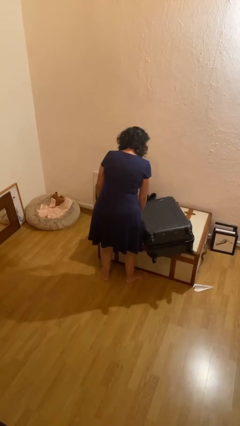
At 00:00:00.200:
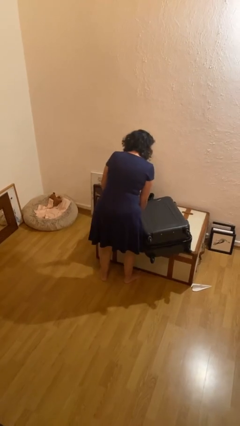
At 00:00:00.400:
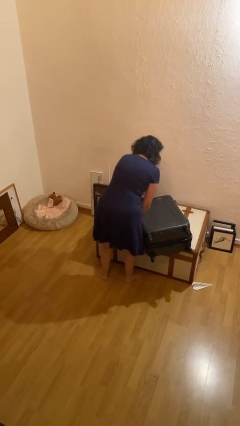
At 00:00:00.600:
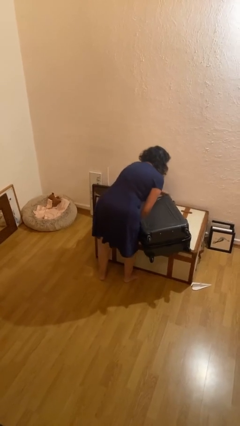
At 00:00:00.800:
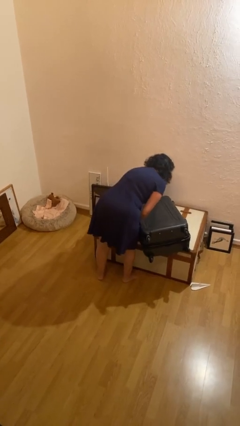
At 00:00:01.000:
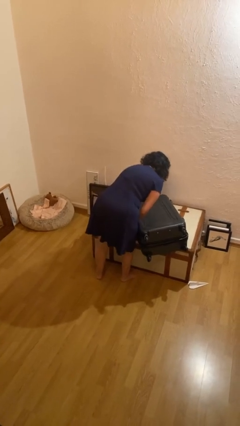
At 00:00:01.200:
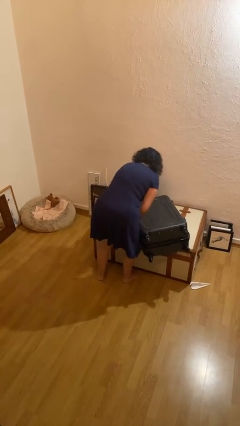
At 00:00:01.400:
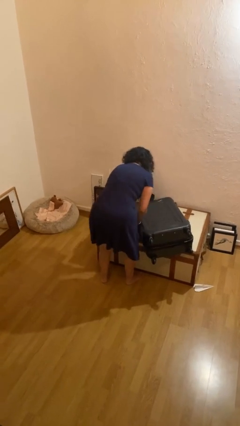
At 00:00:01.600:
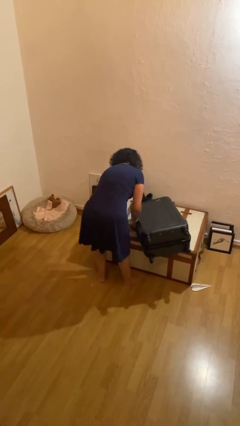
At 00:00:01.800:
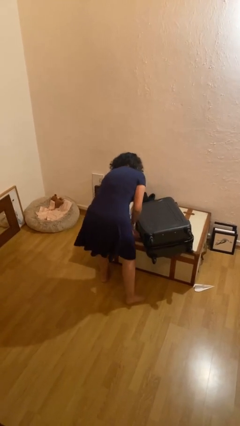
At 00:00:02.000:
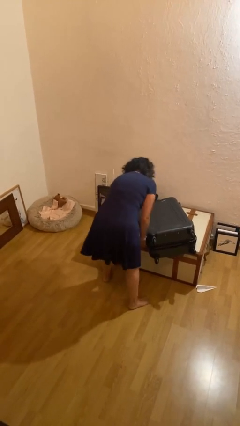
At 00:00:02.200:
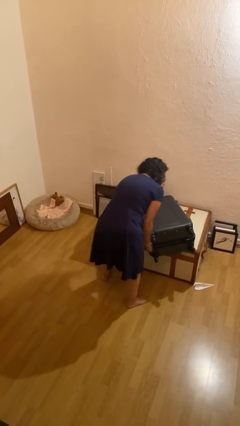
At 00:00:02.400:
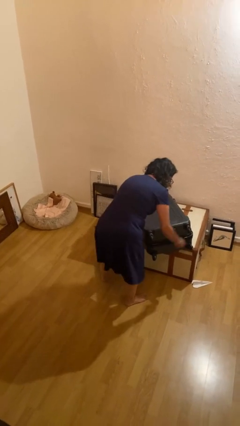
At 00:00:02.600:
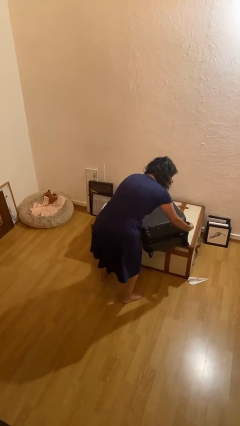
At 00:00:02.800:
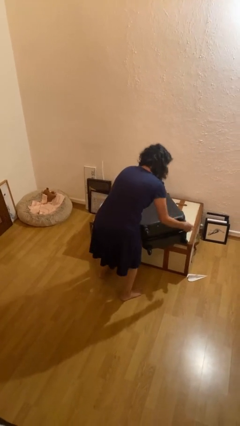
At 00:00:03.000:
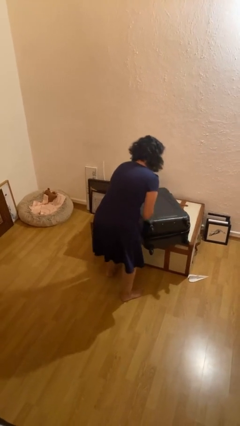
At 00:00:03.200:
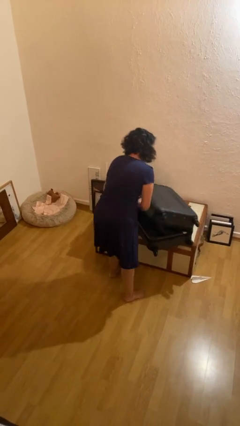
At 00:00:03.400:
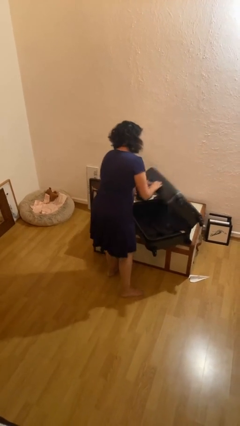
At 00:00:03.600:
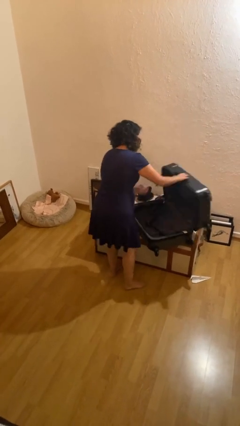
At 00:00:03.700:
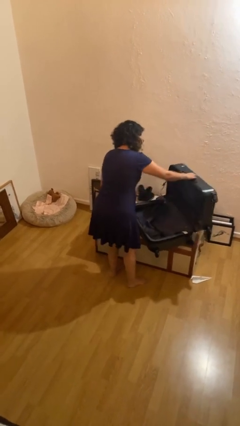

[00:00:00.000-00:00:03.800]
person opens suitcase

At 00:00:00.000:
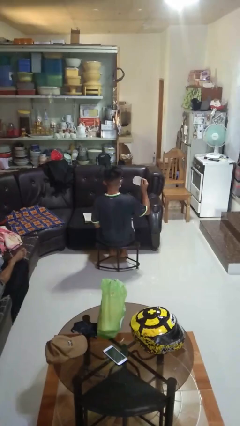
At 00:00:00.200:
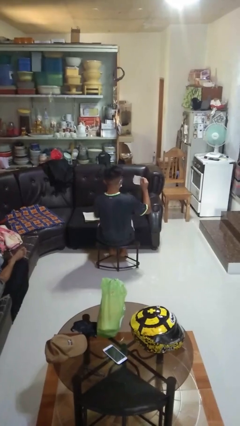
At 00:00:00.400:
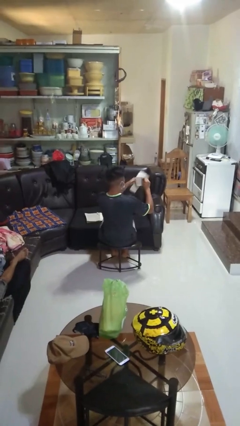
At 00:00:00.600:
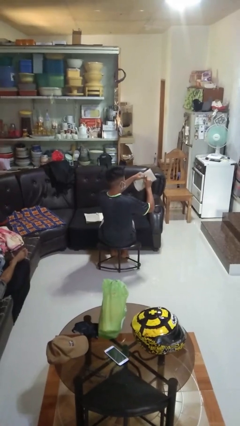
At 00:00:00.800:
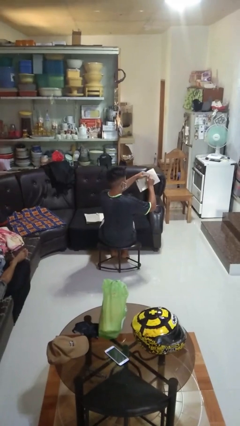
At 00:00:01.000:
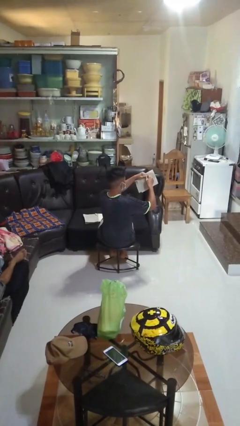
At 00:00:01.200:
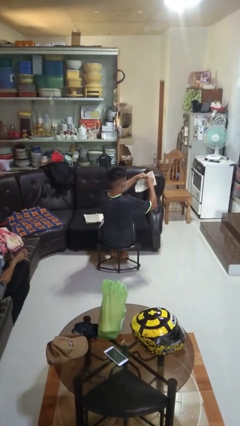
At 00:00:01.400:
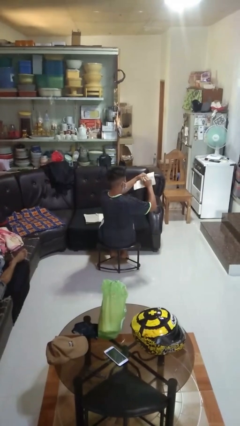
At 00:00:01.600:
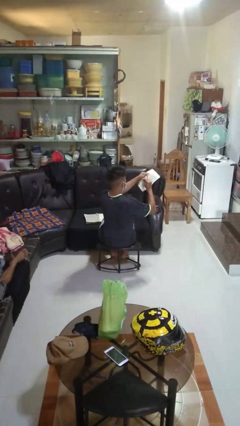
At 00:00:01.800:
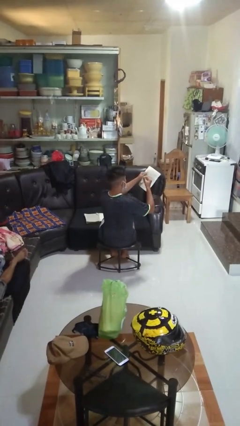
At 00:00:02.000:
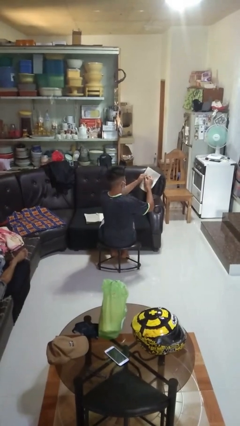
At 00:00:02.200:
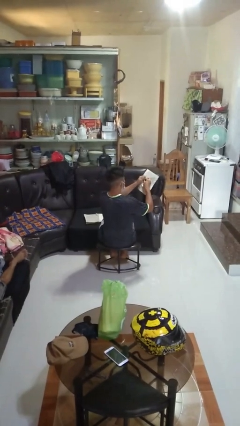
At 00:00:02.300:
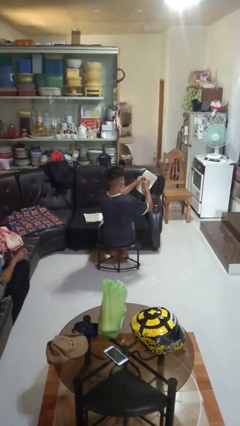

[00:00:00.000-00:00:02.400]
person tears paper

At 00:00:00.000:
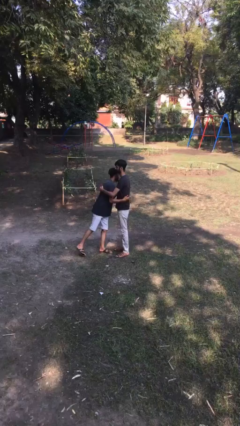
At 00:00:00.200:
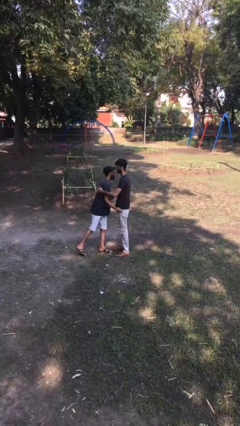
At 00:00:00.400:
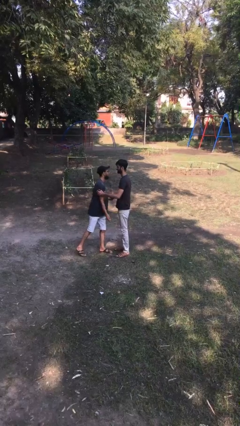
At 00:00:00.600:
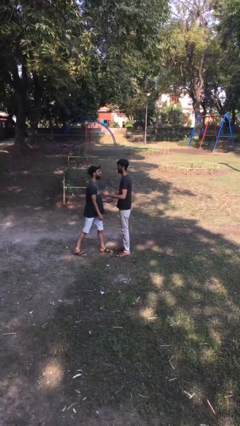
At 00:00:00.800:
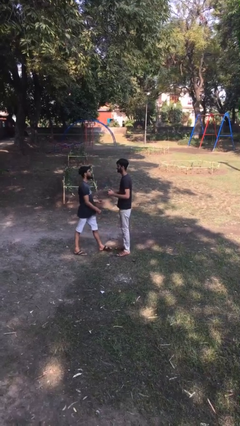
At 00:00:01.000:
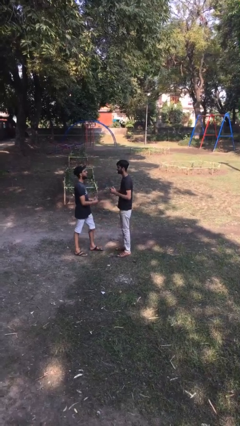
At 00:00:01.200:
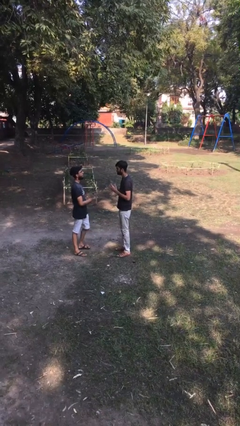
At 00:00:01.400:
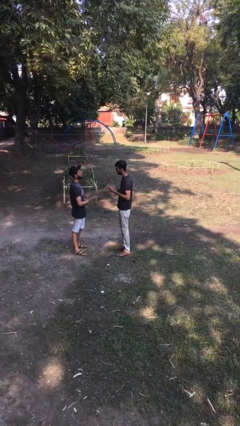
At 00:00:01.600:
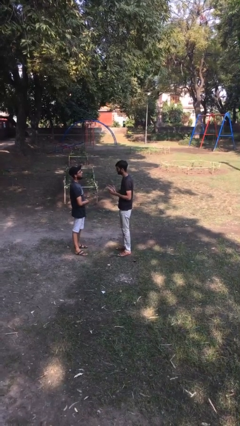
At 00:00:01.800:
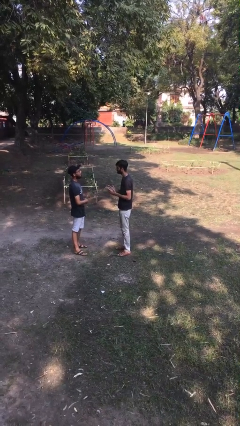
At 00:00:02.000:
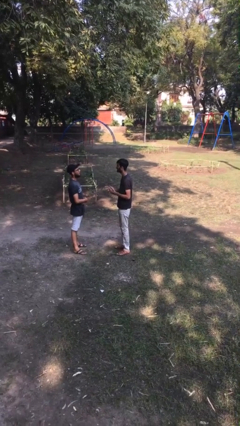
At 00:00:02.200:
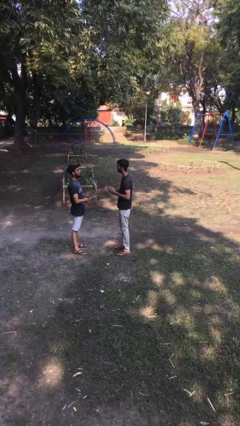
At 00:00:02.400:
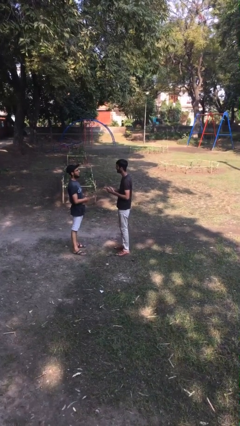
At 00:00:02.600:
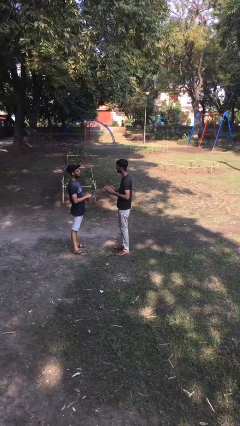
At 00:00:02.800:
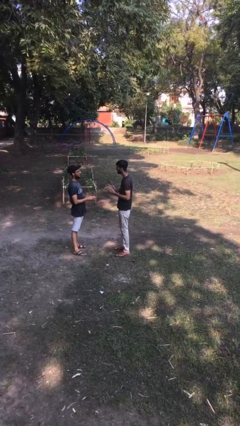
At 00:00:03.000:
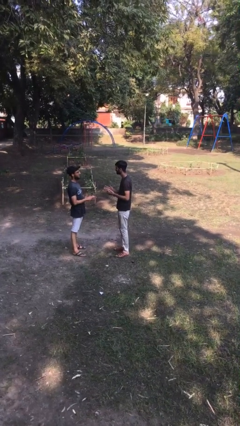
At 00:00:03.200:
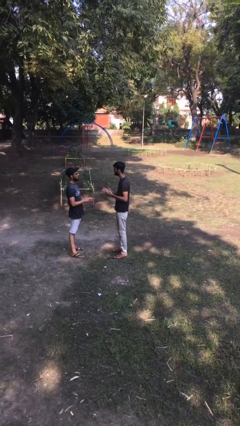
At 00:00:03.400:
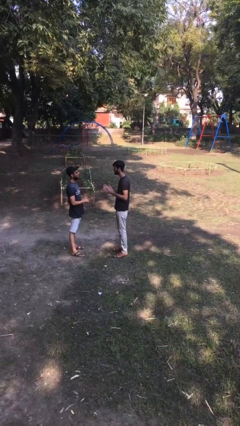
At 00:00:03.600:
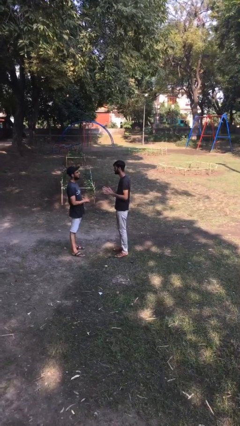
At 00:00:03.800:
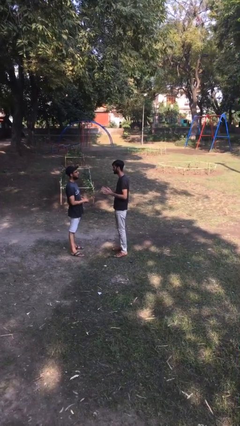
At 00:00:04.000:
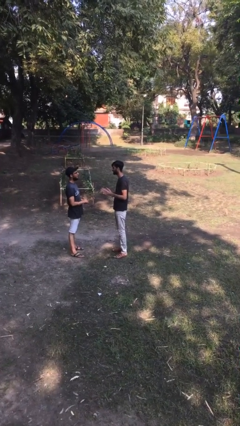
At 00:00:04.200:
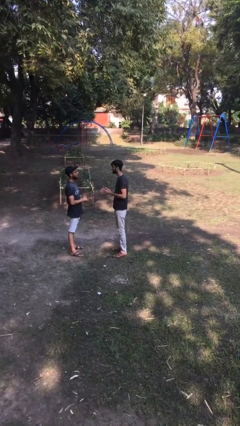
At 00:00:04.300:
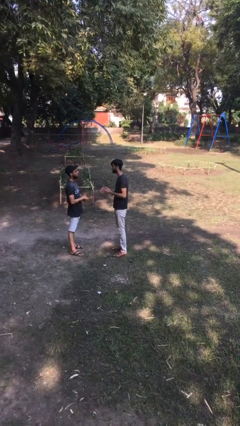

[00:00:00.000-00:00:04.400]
person talks to person

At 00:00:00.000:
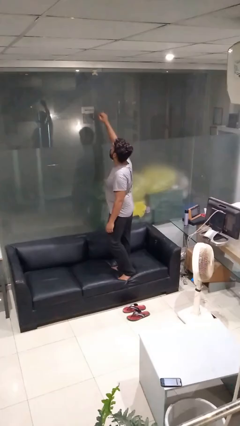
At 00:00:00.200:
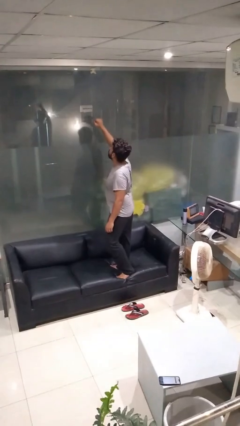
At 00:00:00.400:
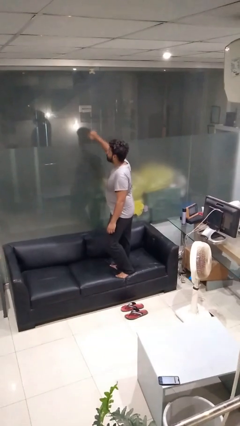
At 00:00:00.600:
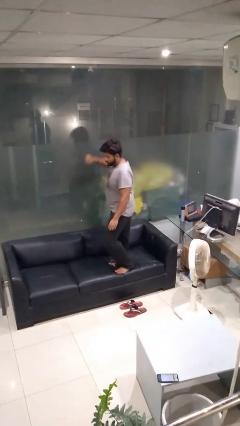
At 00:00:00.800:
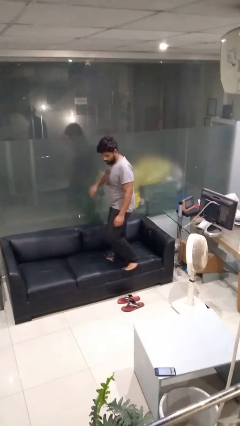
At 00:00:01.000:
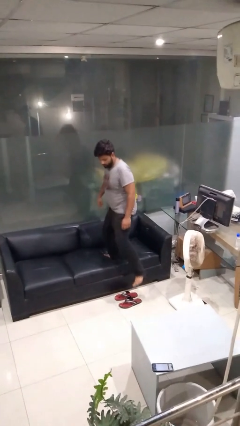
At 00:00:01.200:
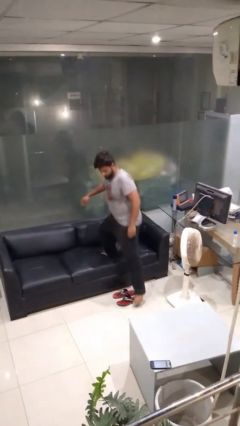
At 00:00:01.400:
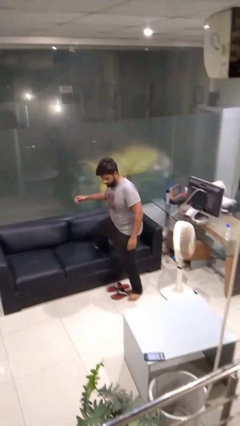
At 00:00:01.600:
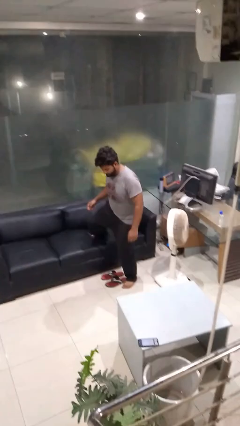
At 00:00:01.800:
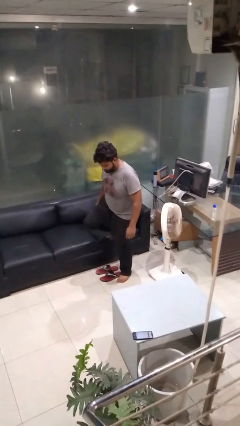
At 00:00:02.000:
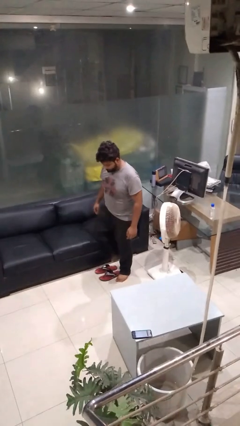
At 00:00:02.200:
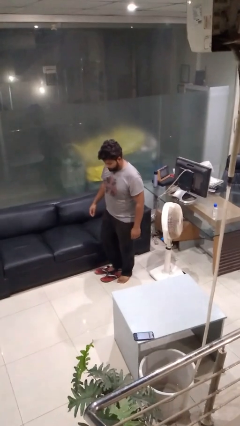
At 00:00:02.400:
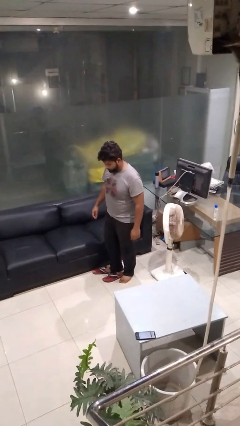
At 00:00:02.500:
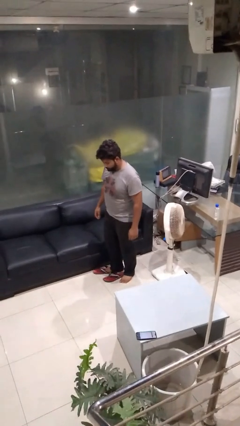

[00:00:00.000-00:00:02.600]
person climbs off couch

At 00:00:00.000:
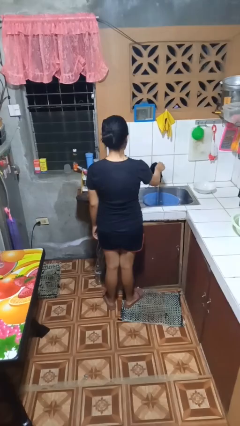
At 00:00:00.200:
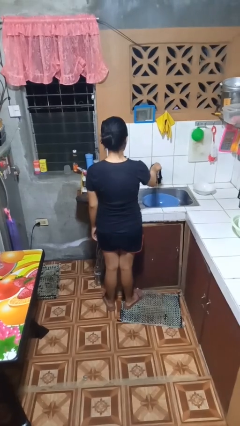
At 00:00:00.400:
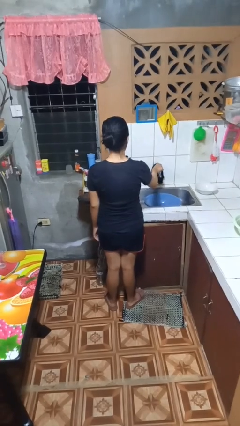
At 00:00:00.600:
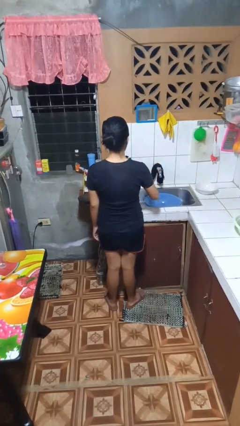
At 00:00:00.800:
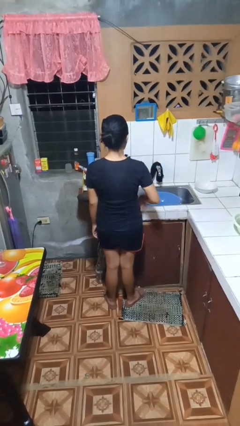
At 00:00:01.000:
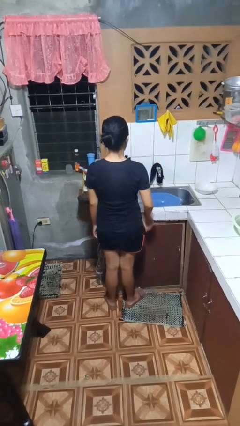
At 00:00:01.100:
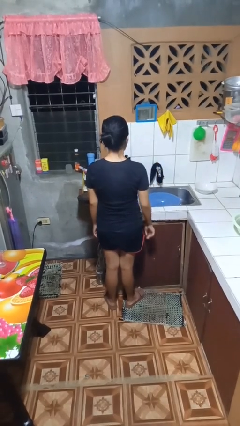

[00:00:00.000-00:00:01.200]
person turns off faucet

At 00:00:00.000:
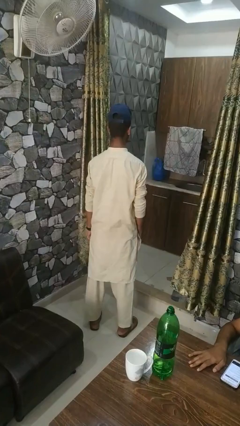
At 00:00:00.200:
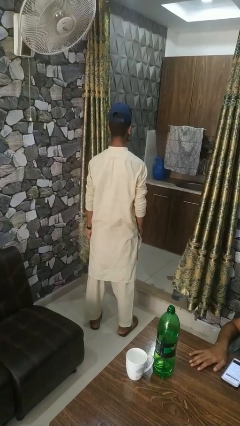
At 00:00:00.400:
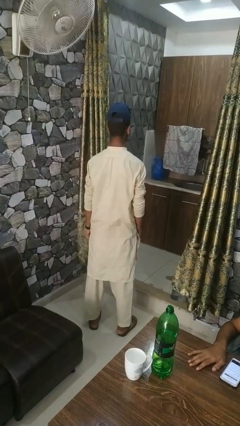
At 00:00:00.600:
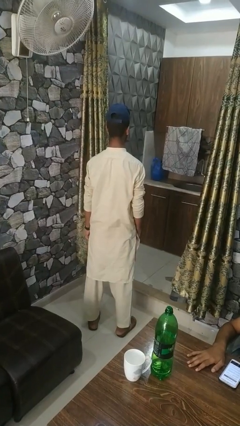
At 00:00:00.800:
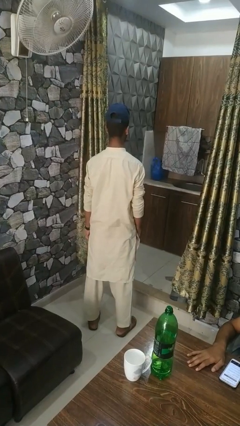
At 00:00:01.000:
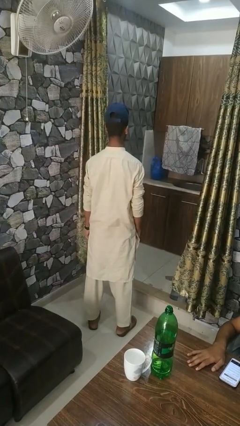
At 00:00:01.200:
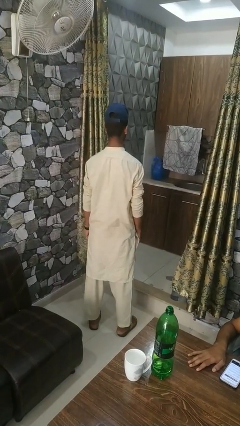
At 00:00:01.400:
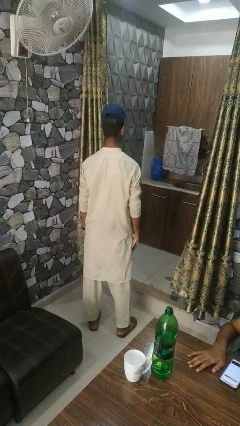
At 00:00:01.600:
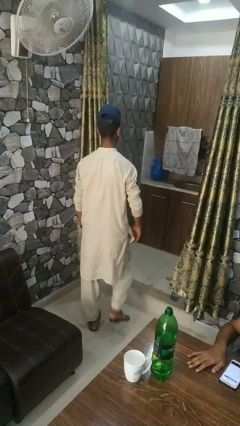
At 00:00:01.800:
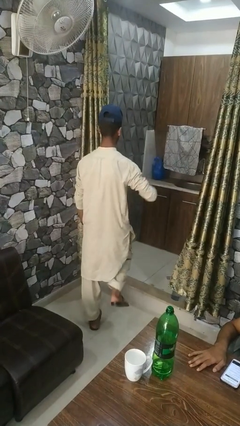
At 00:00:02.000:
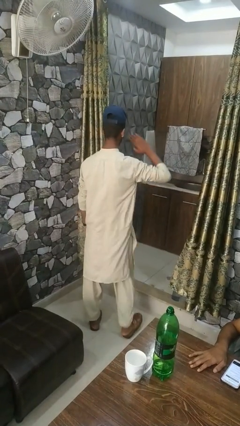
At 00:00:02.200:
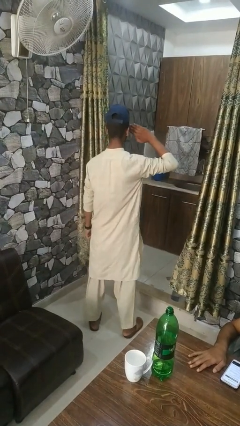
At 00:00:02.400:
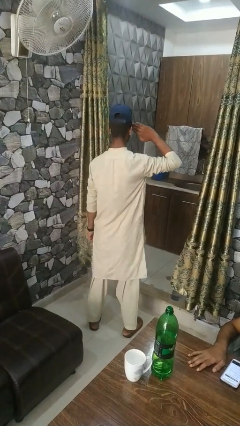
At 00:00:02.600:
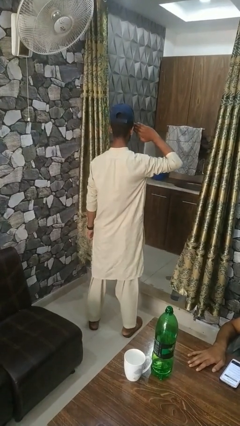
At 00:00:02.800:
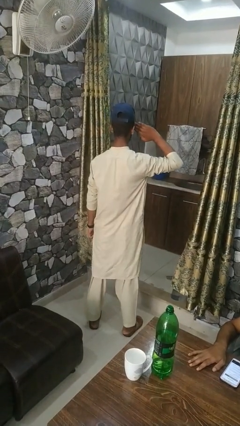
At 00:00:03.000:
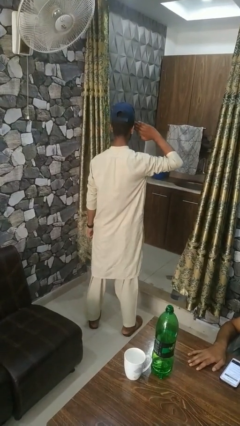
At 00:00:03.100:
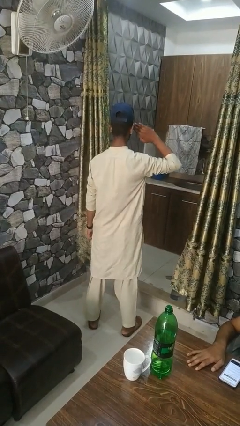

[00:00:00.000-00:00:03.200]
person salutes
